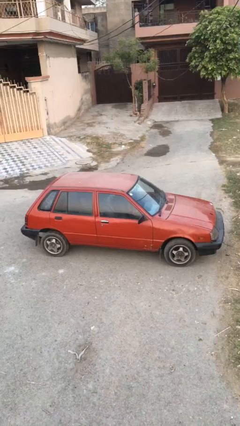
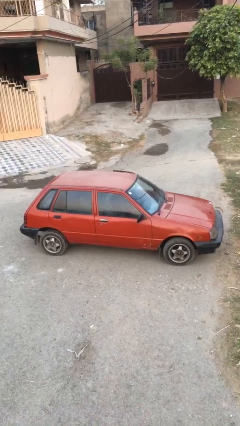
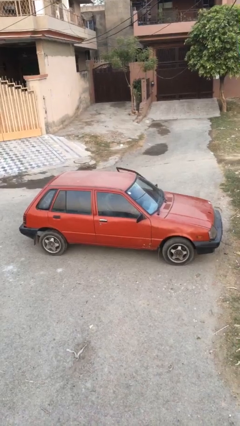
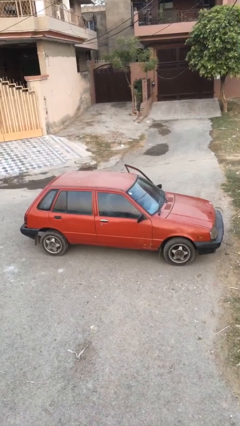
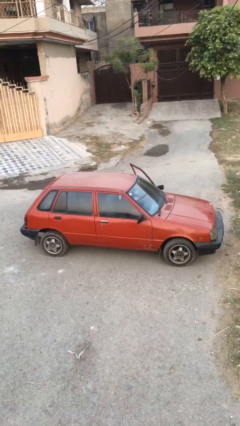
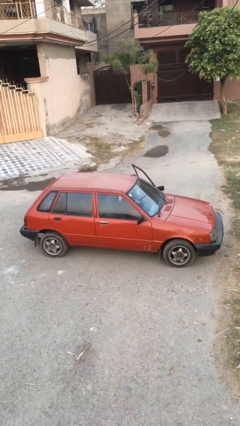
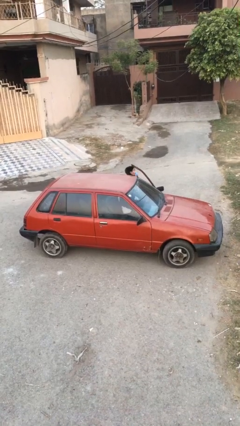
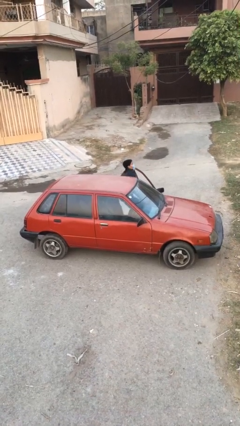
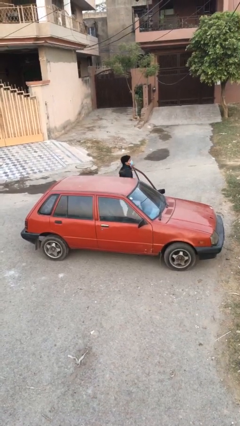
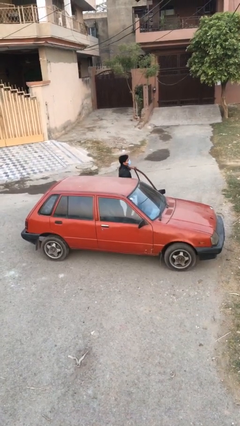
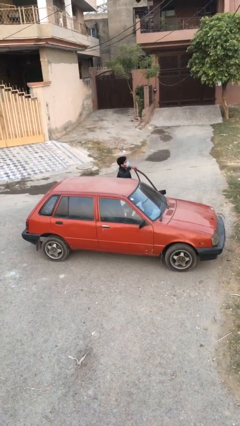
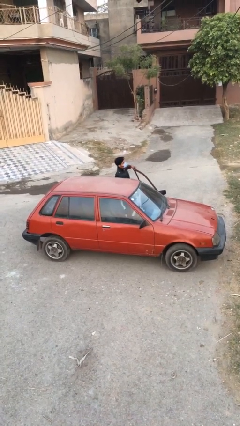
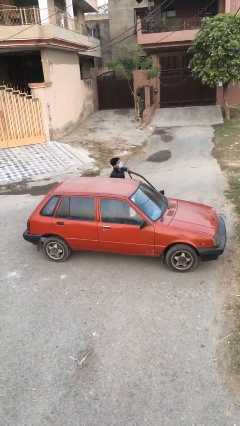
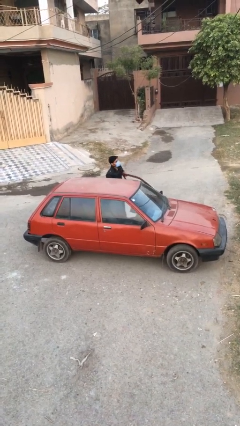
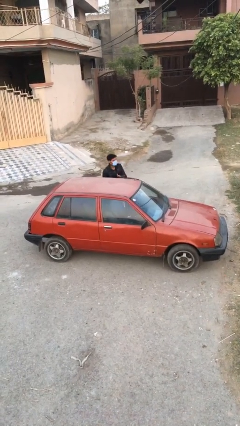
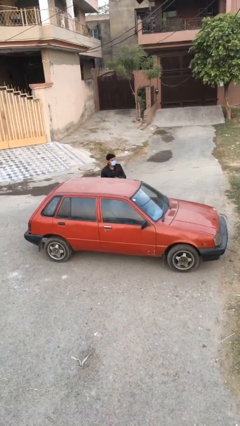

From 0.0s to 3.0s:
car drops off person

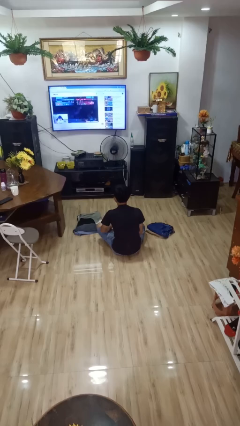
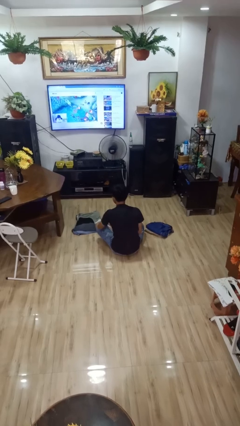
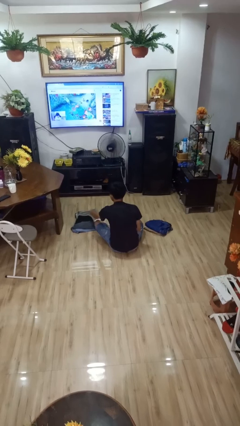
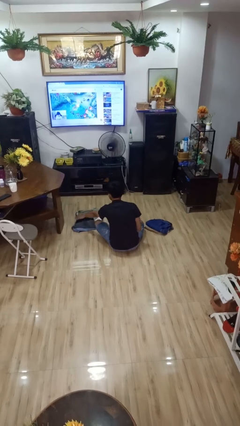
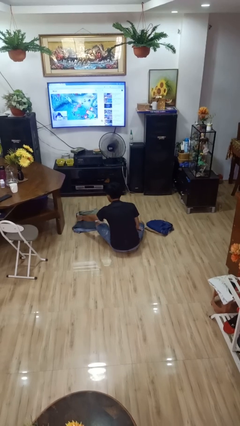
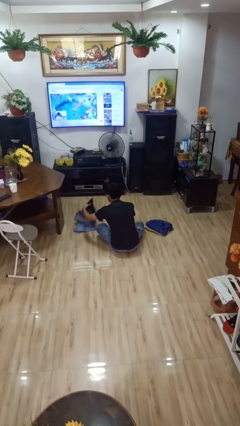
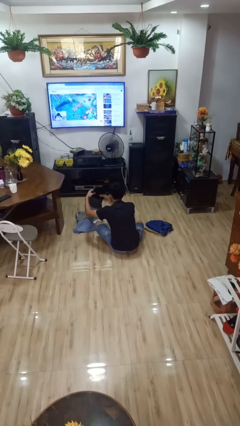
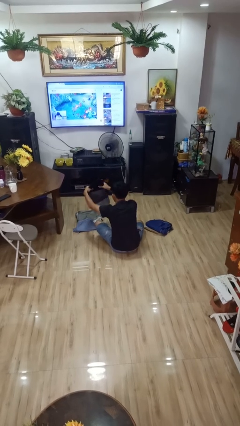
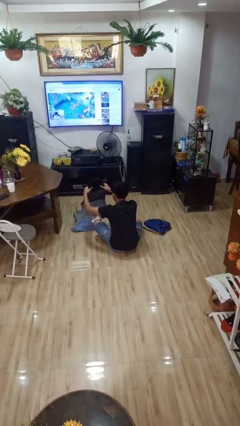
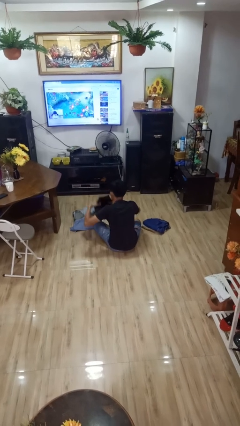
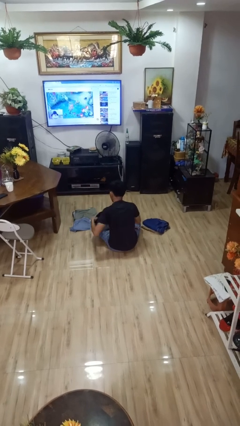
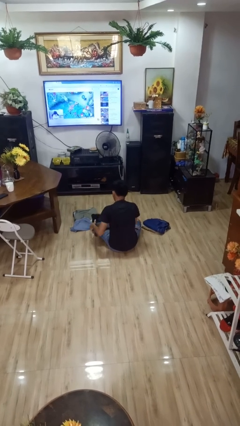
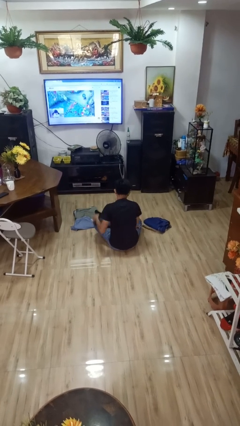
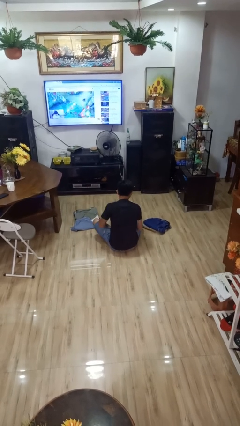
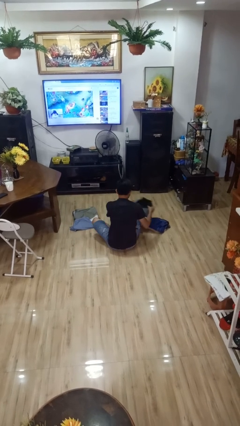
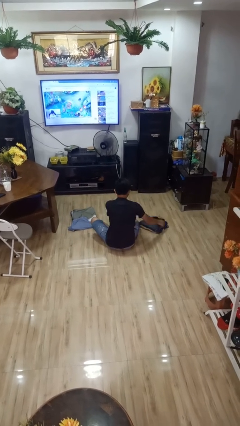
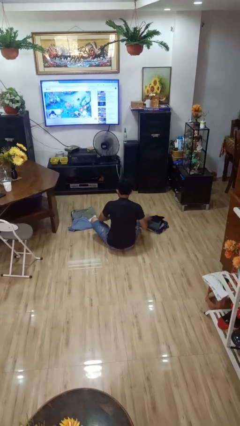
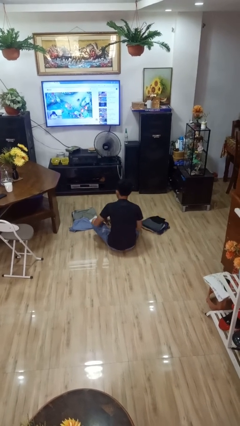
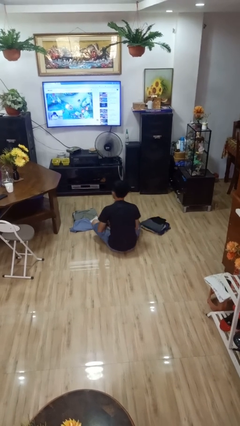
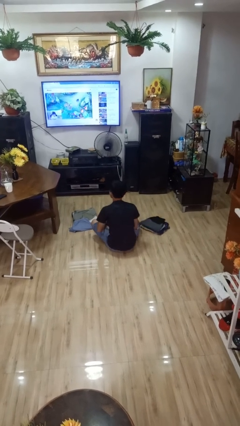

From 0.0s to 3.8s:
person folds pants

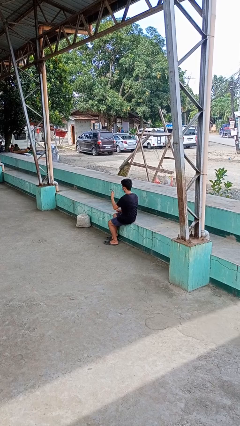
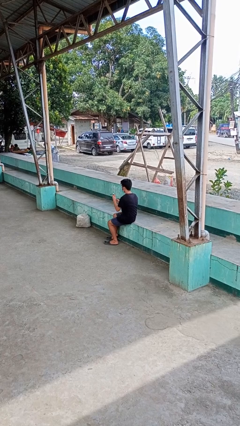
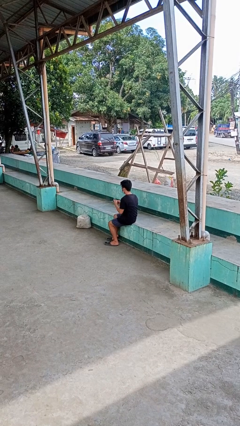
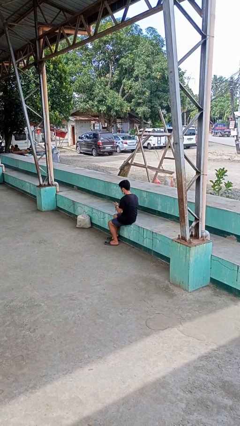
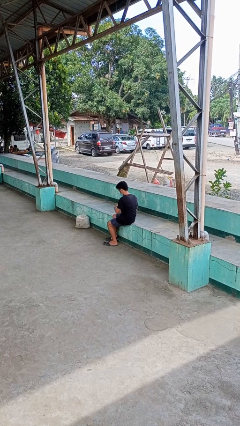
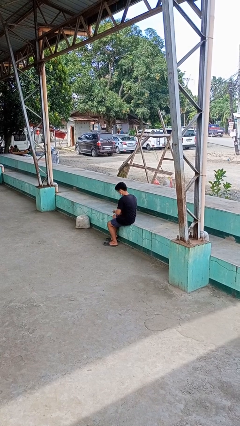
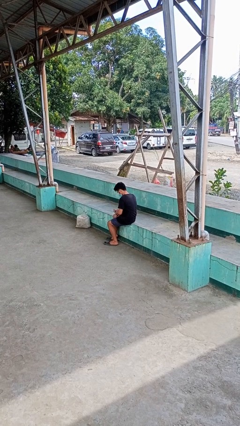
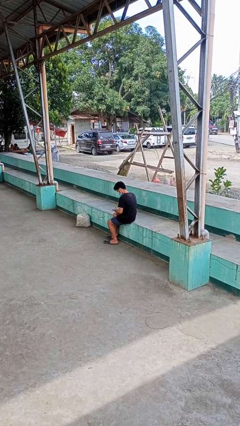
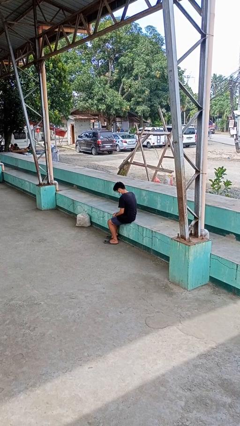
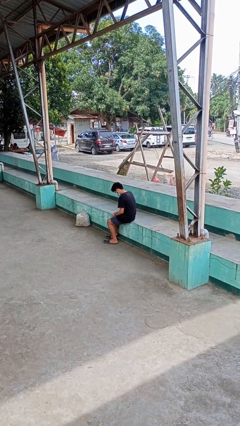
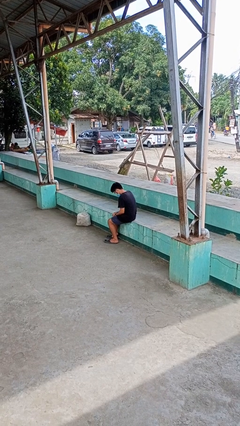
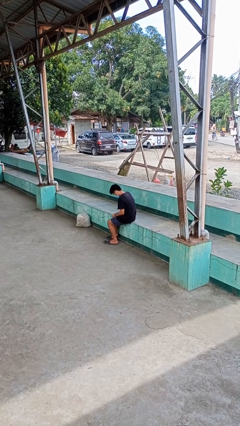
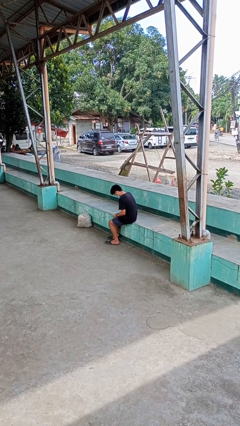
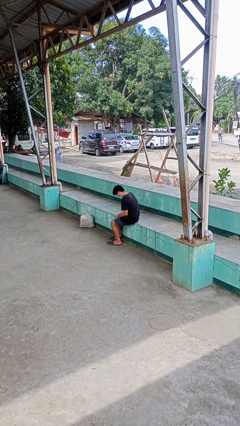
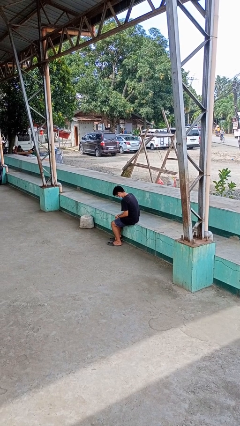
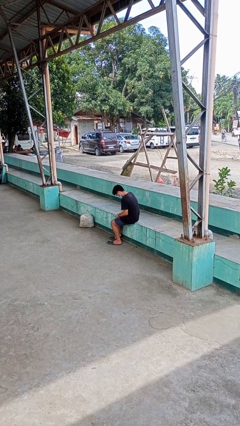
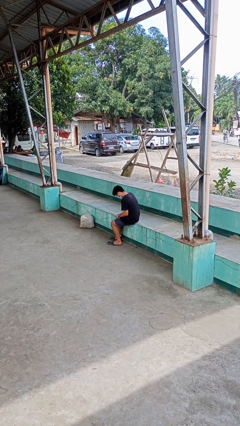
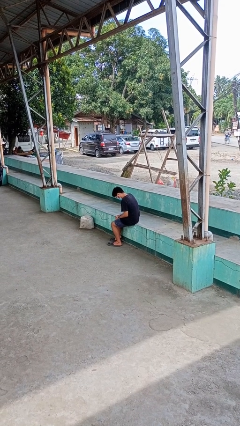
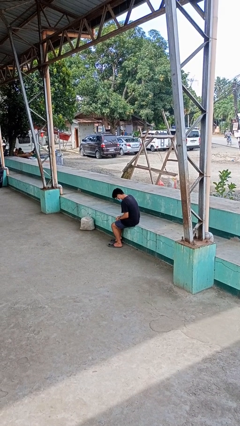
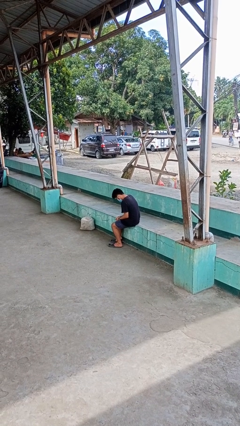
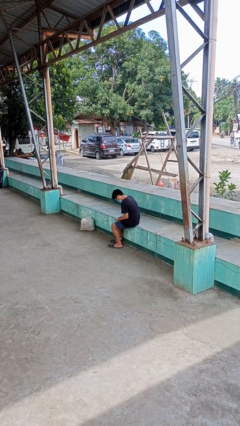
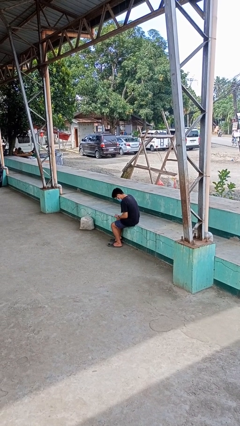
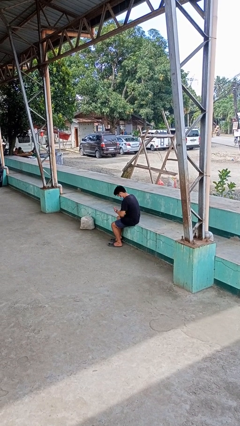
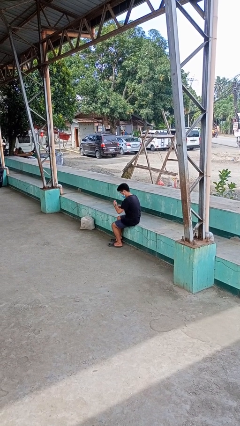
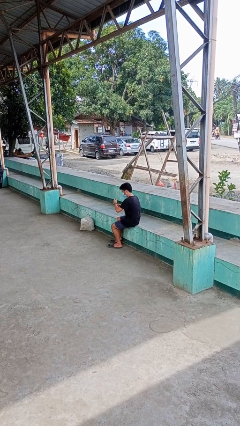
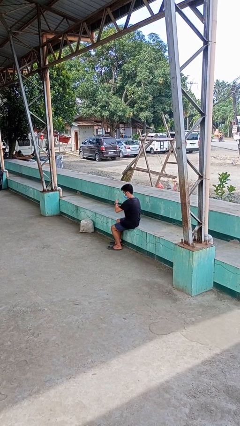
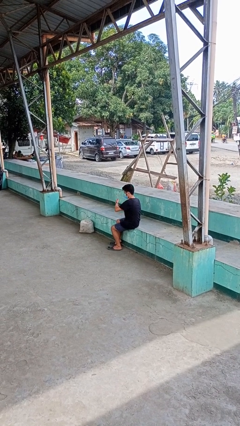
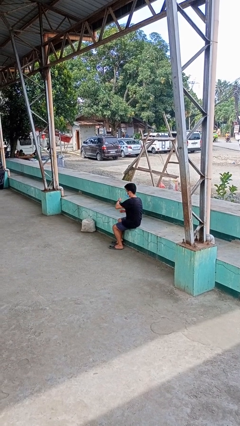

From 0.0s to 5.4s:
person puts on wristwatch

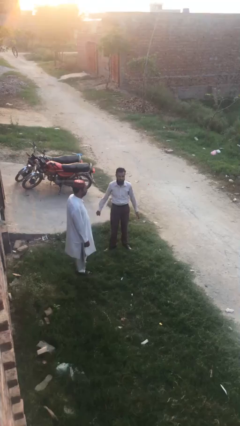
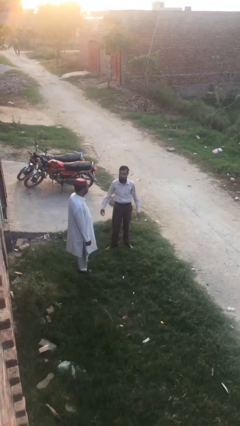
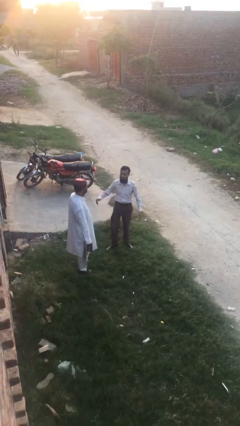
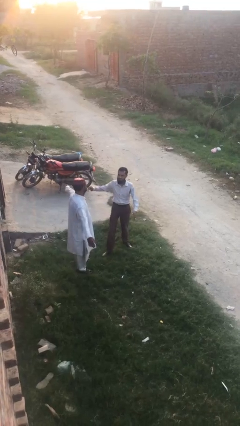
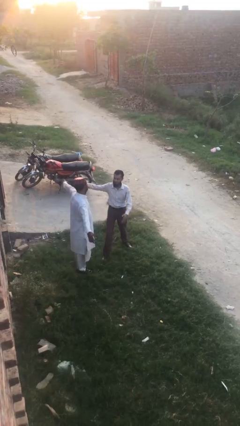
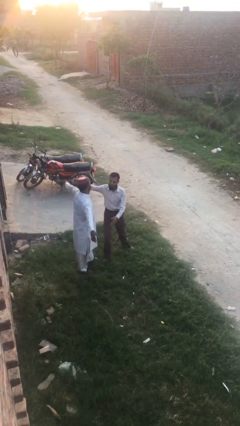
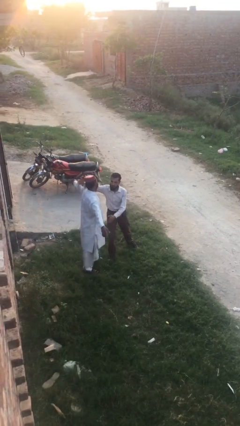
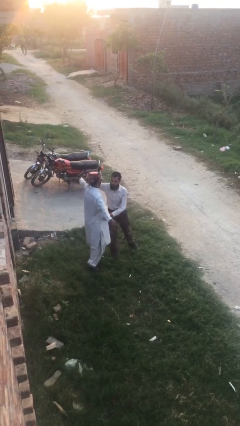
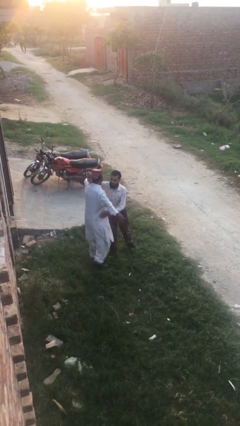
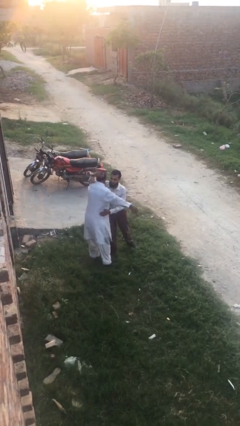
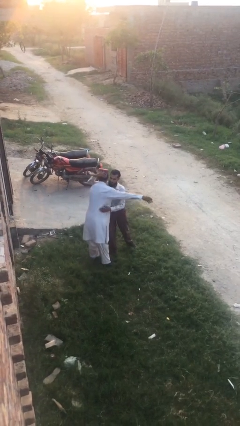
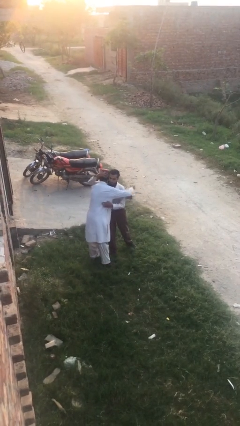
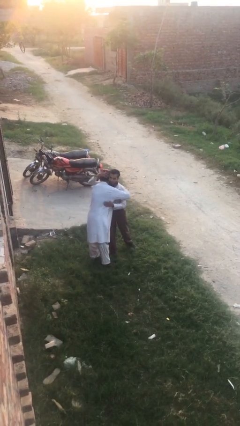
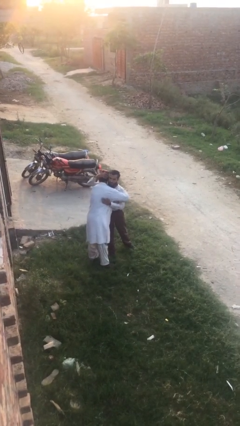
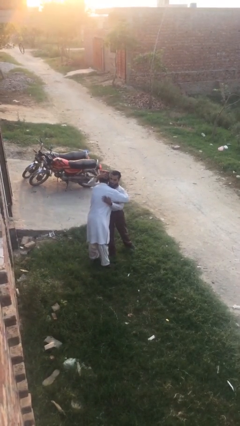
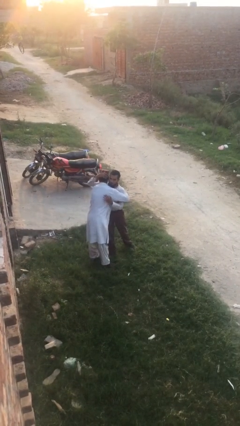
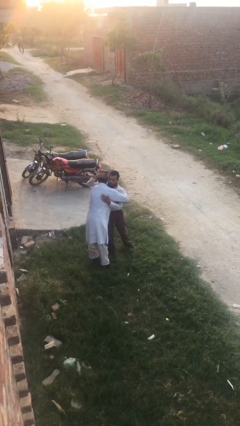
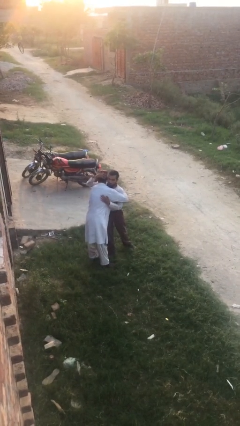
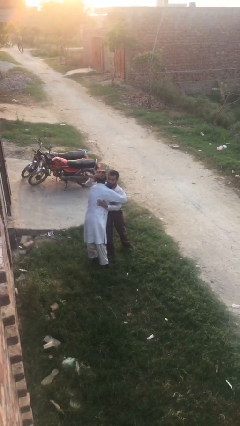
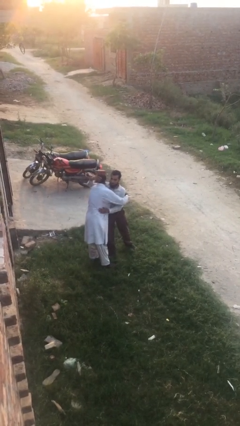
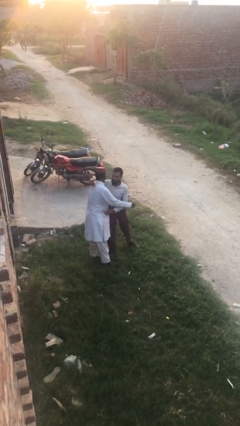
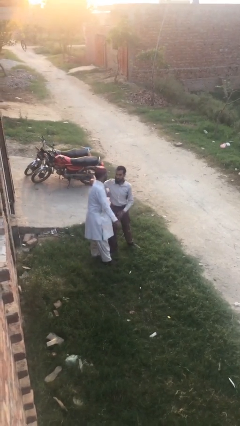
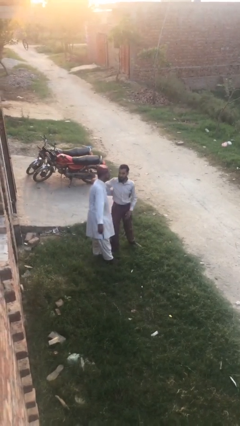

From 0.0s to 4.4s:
person embraces person

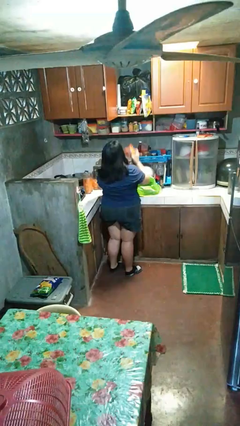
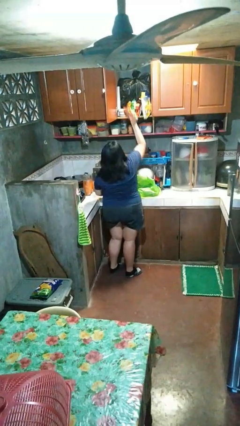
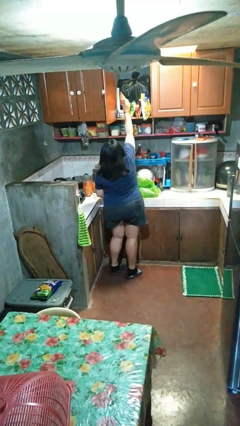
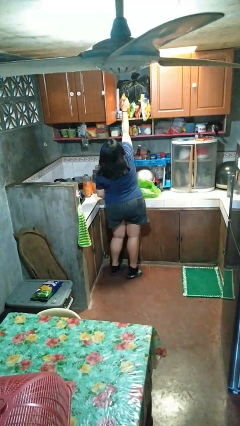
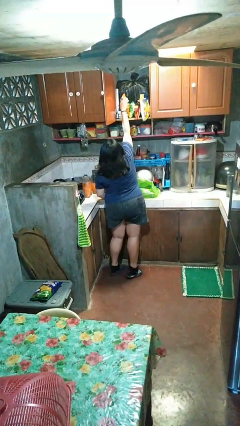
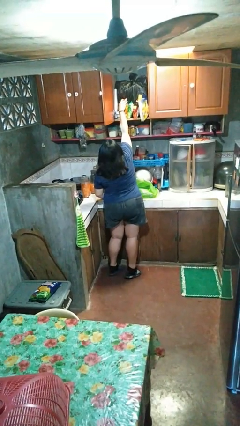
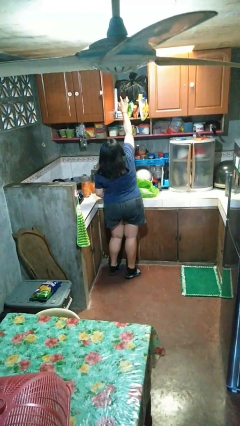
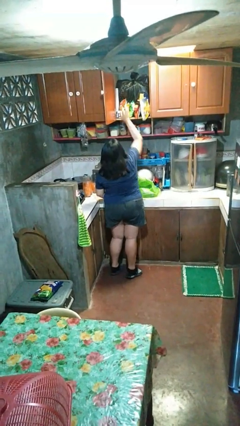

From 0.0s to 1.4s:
person loads groceries into cabinet
